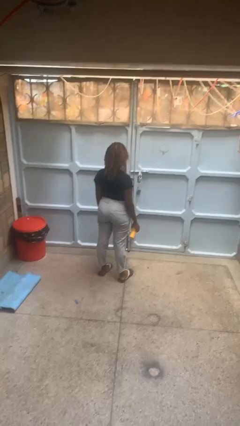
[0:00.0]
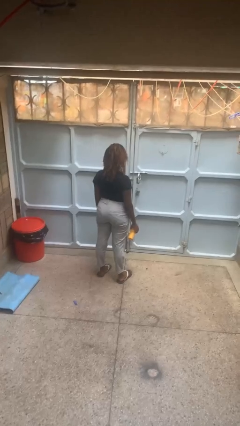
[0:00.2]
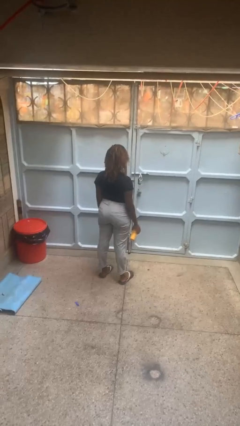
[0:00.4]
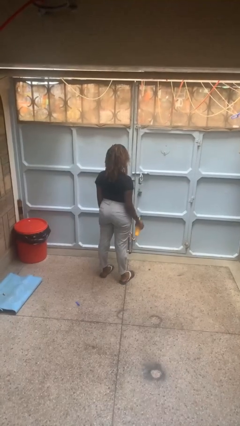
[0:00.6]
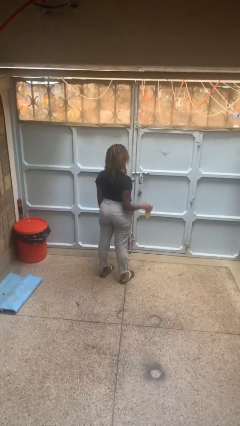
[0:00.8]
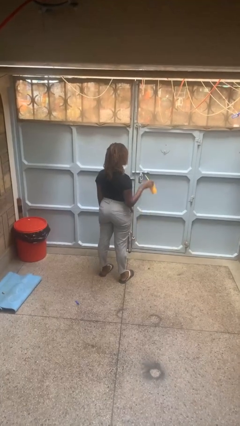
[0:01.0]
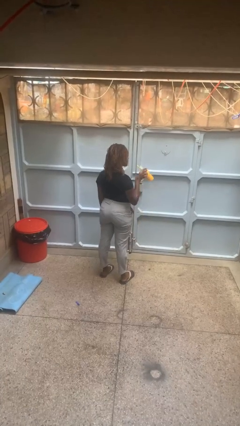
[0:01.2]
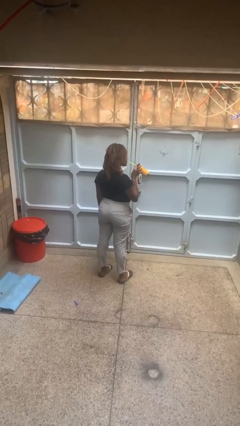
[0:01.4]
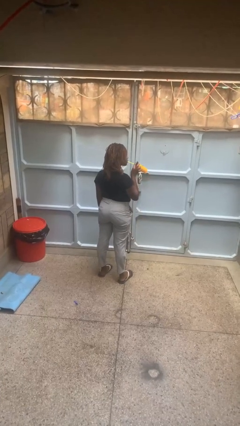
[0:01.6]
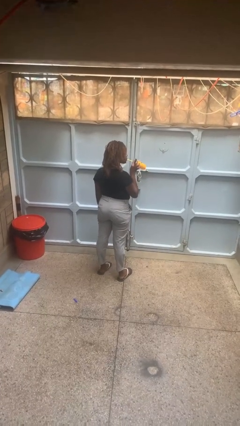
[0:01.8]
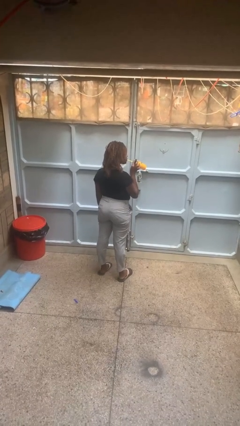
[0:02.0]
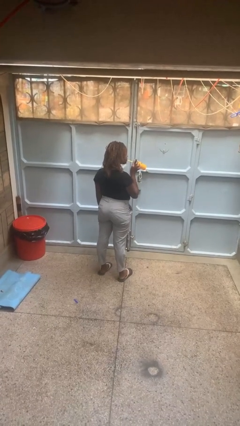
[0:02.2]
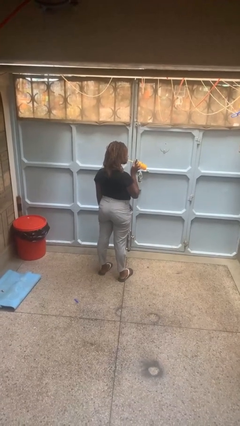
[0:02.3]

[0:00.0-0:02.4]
person drinks from straw

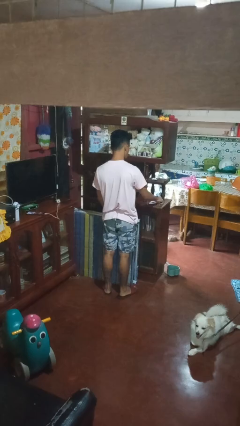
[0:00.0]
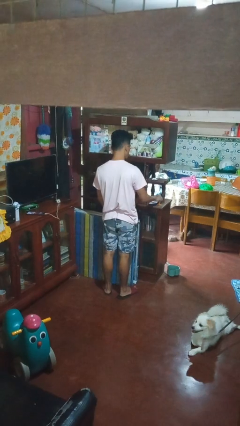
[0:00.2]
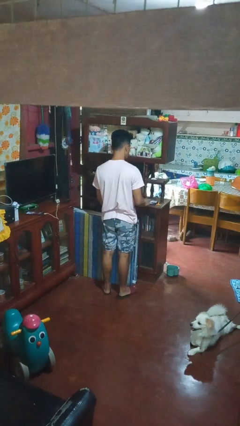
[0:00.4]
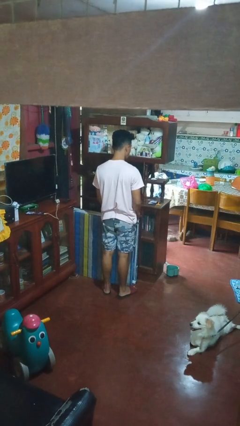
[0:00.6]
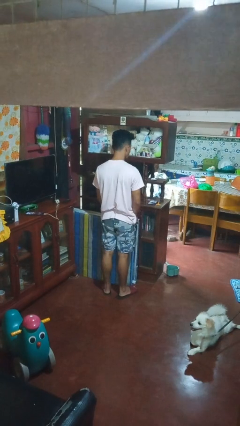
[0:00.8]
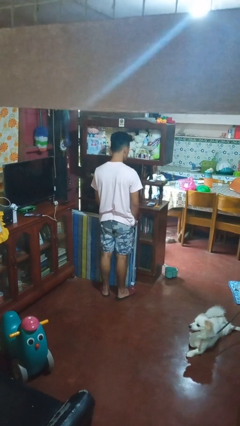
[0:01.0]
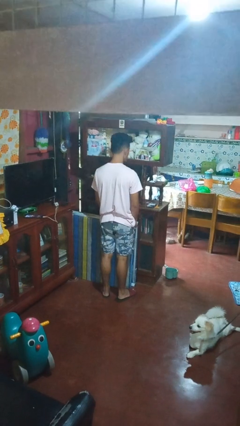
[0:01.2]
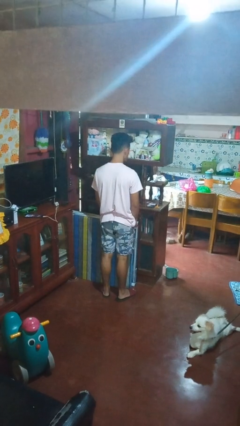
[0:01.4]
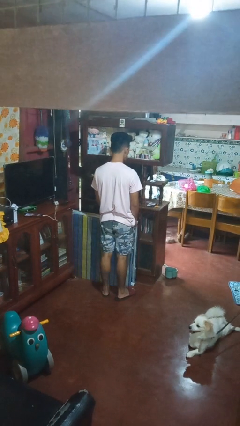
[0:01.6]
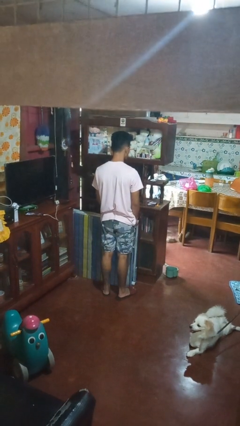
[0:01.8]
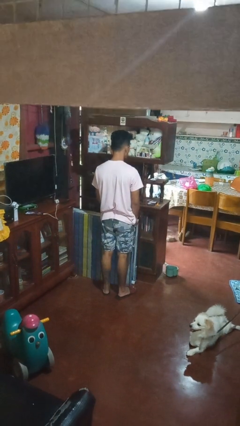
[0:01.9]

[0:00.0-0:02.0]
person puts down object on shelf

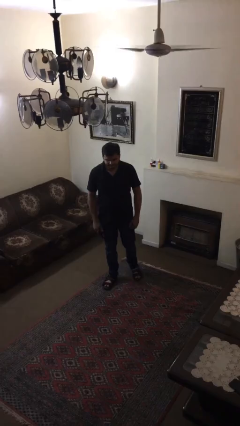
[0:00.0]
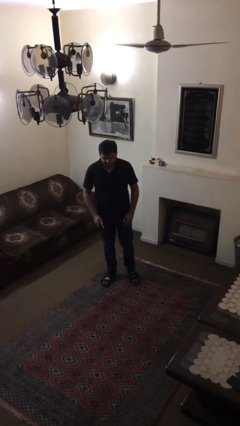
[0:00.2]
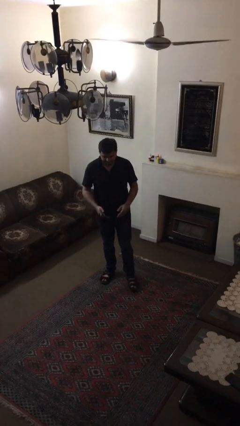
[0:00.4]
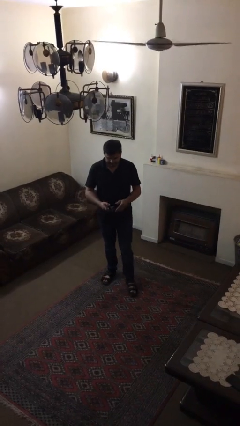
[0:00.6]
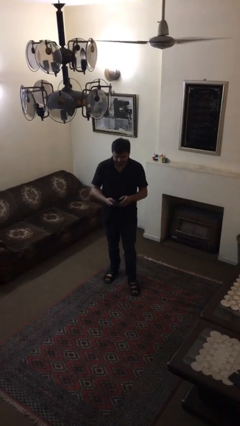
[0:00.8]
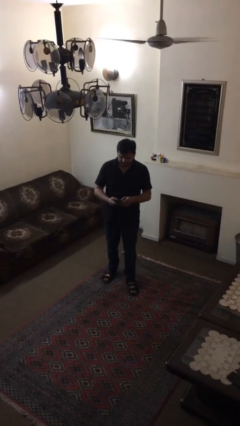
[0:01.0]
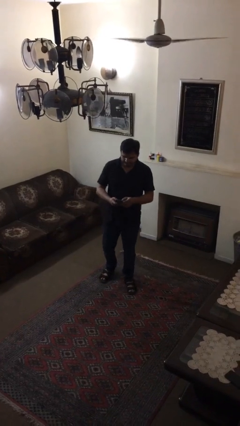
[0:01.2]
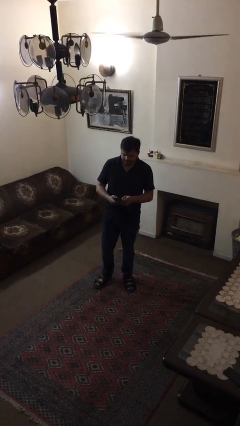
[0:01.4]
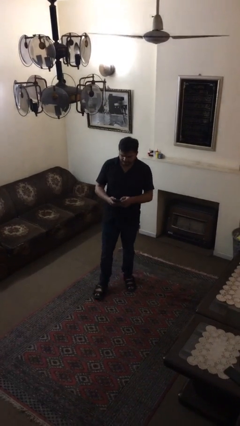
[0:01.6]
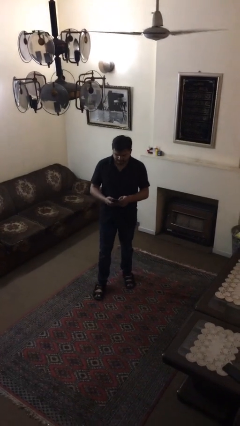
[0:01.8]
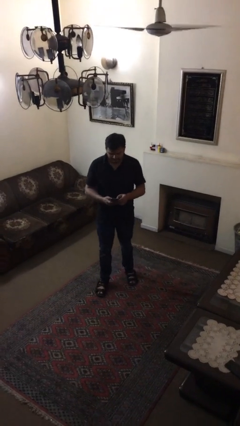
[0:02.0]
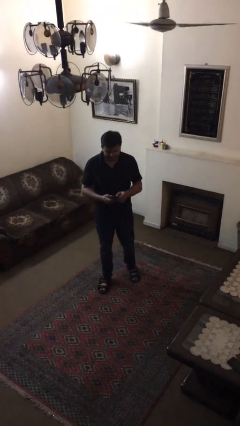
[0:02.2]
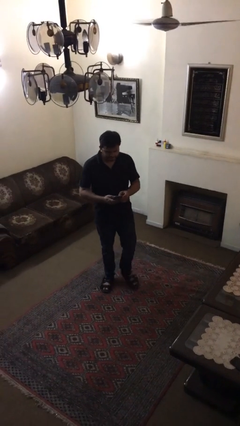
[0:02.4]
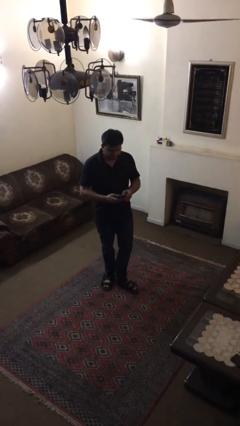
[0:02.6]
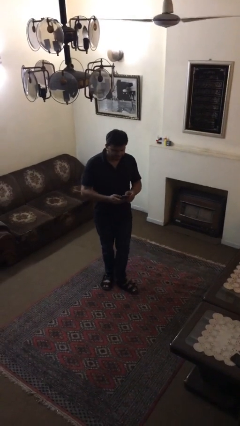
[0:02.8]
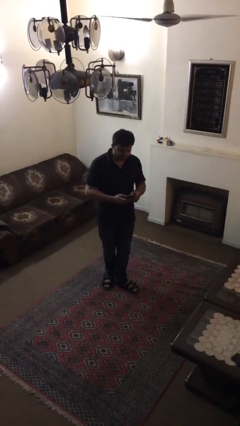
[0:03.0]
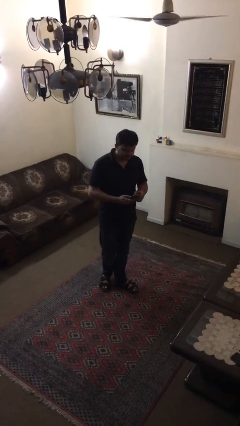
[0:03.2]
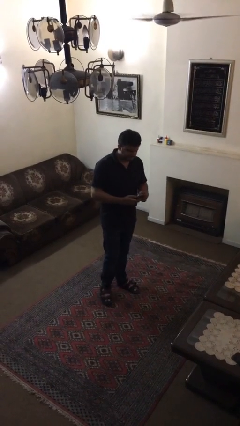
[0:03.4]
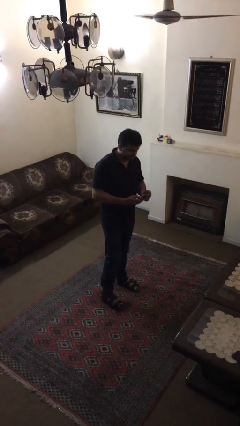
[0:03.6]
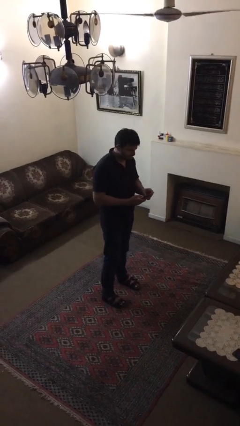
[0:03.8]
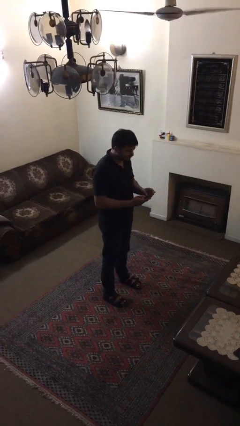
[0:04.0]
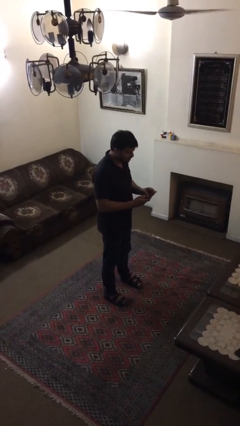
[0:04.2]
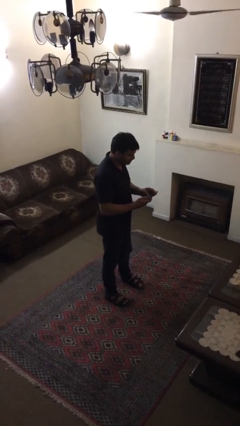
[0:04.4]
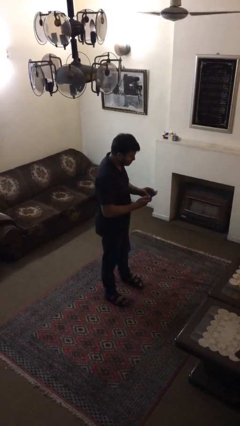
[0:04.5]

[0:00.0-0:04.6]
person texts on phone

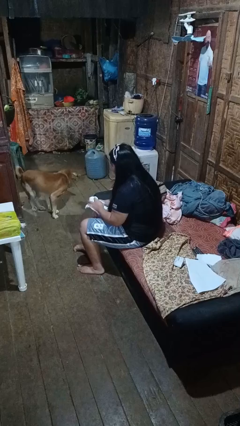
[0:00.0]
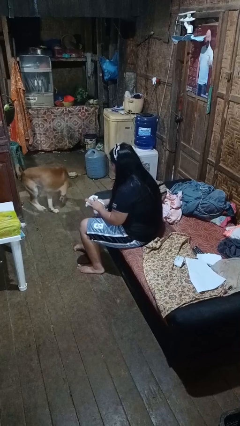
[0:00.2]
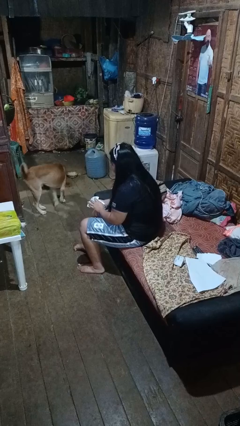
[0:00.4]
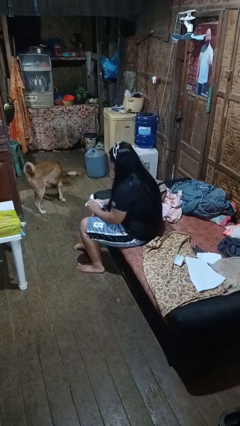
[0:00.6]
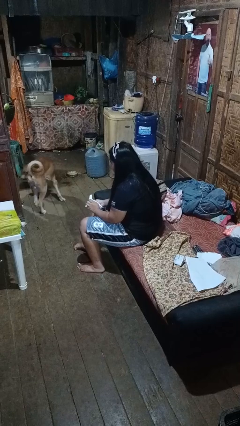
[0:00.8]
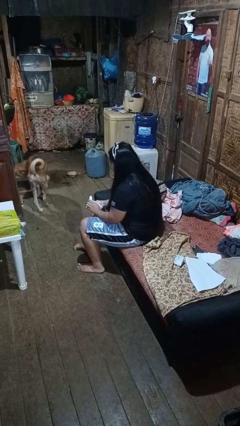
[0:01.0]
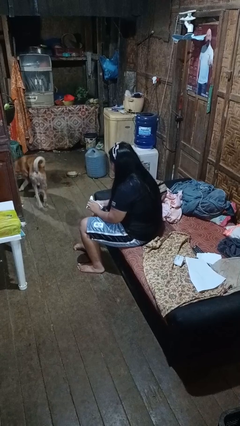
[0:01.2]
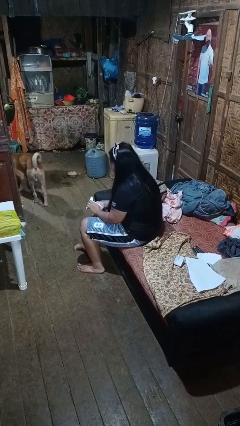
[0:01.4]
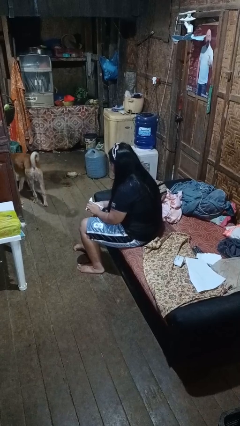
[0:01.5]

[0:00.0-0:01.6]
person crumples paper

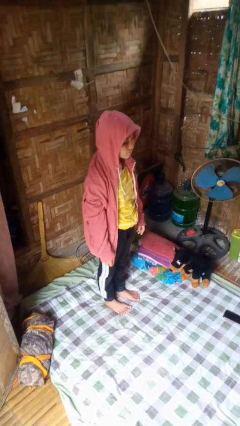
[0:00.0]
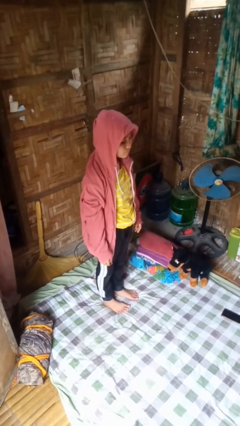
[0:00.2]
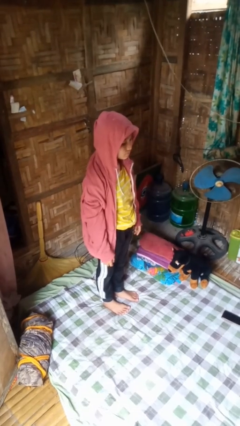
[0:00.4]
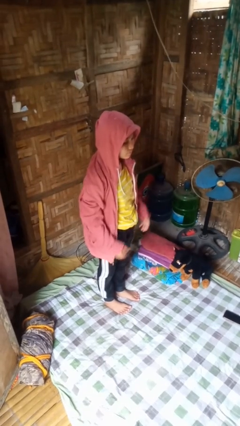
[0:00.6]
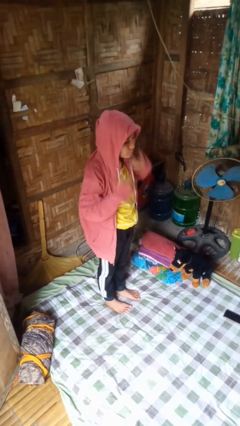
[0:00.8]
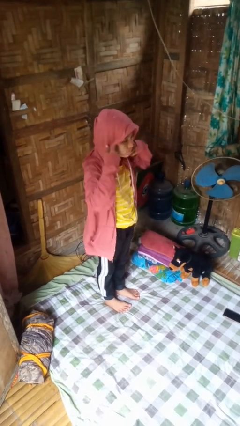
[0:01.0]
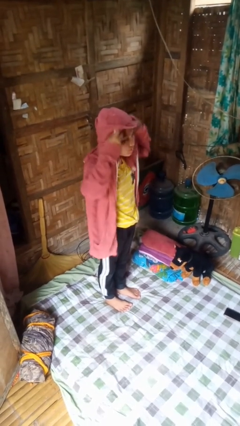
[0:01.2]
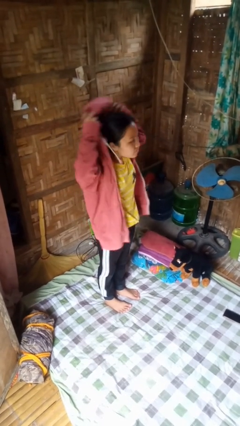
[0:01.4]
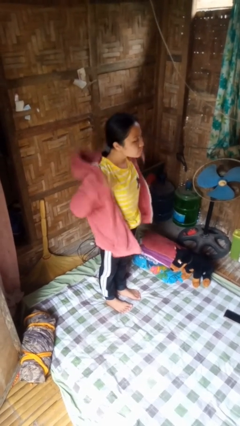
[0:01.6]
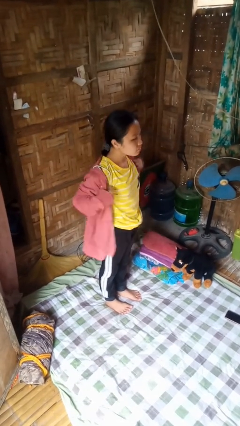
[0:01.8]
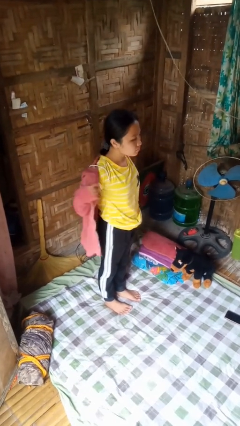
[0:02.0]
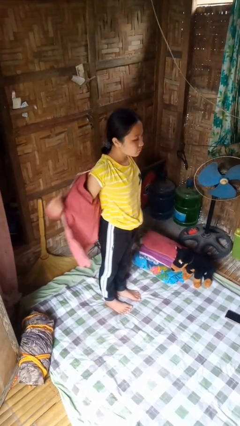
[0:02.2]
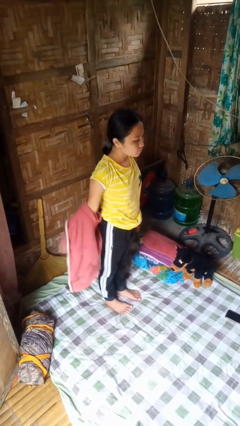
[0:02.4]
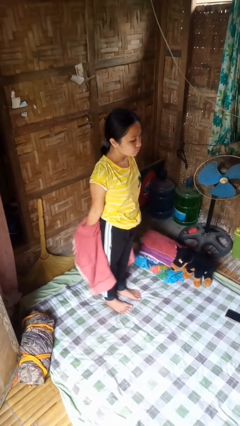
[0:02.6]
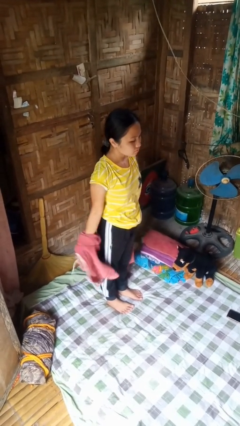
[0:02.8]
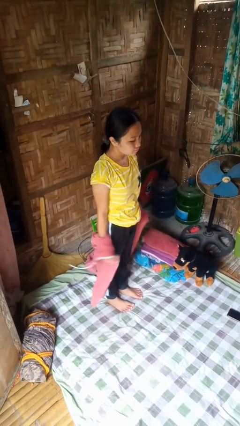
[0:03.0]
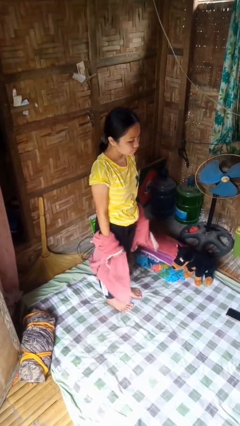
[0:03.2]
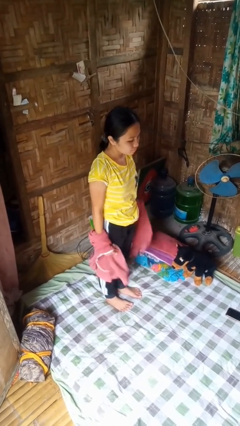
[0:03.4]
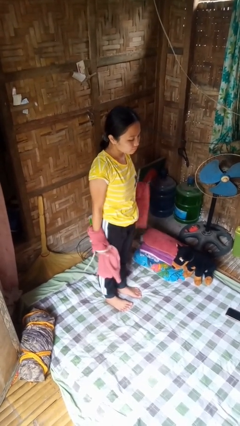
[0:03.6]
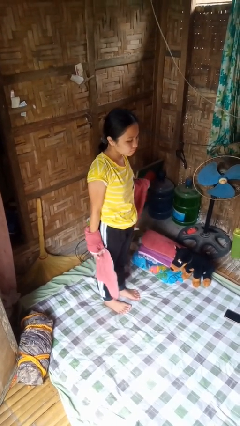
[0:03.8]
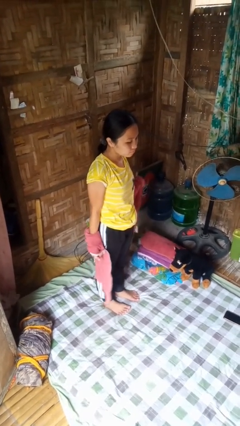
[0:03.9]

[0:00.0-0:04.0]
person takes off hoodie

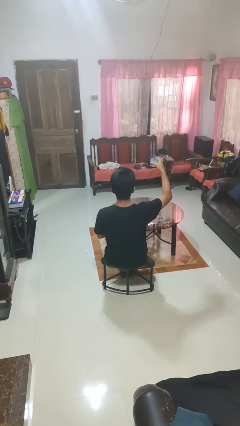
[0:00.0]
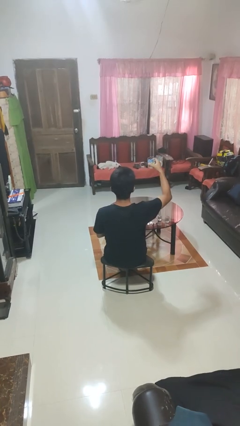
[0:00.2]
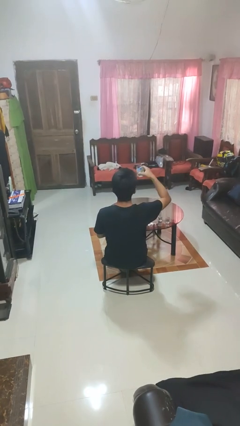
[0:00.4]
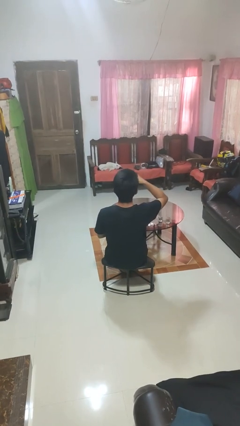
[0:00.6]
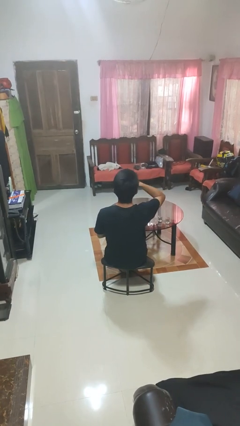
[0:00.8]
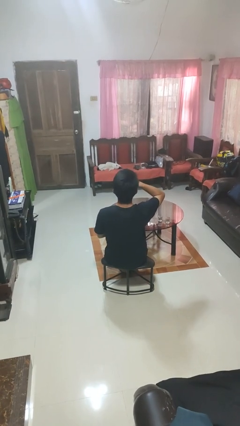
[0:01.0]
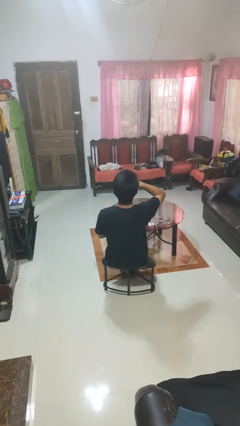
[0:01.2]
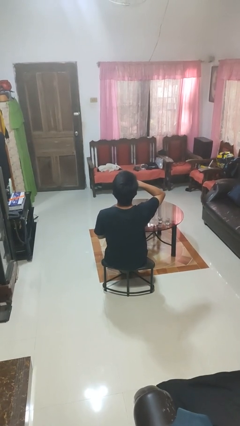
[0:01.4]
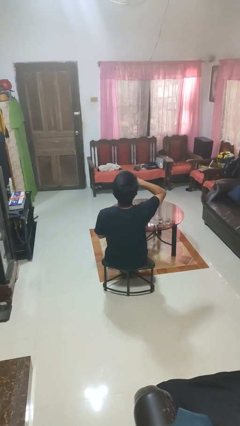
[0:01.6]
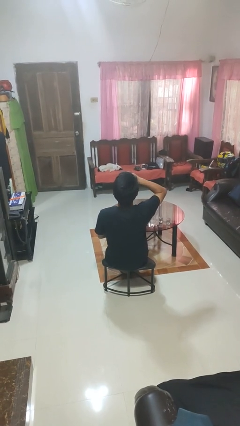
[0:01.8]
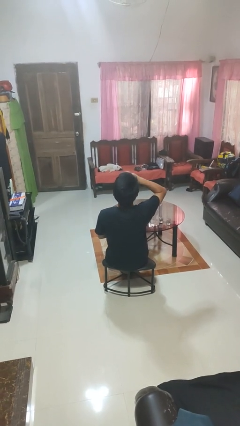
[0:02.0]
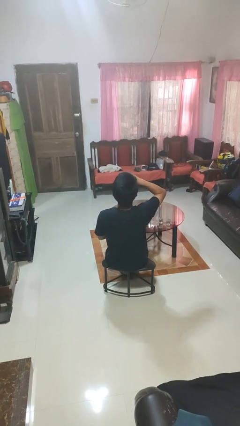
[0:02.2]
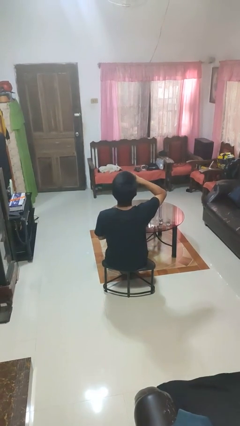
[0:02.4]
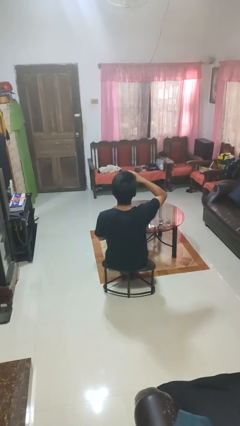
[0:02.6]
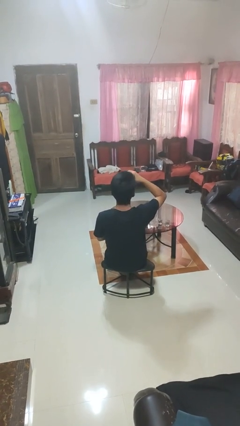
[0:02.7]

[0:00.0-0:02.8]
person drinks from shotglass

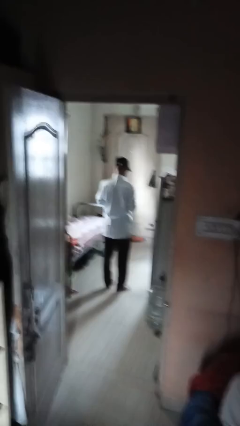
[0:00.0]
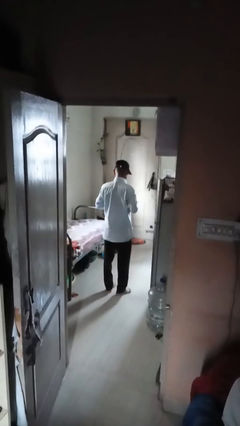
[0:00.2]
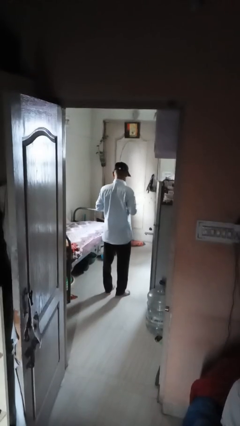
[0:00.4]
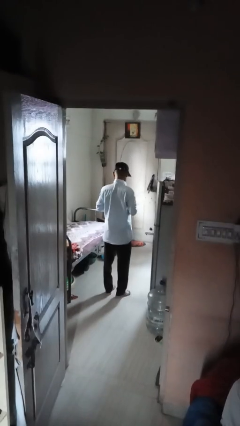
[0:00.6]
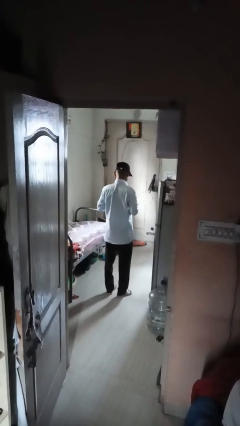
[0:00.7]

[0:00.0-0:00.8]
person bounces ball on floor
